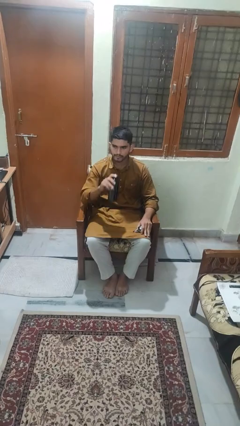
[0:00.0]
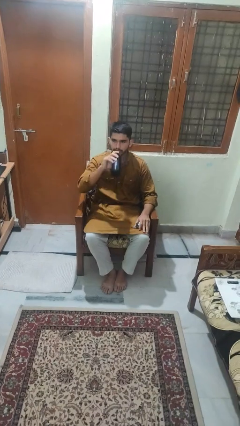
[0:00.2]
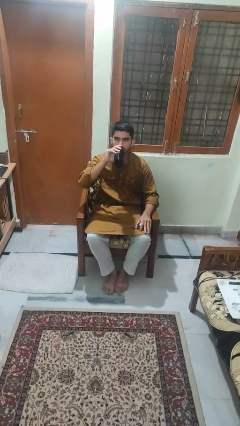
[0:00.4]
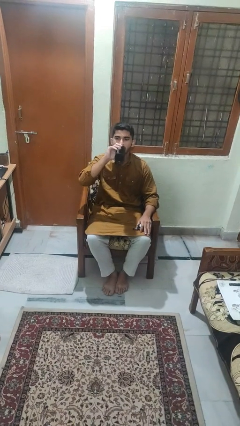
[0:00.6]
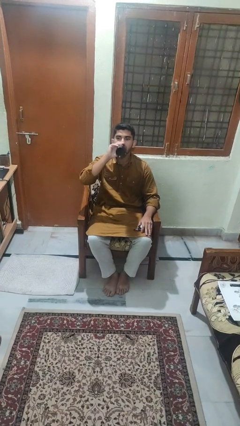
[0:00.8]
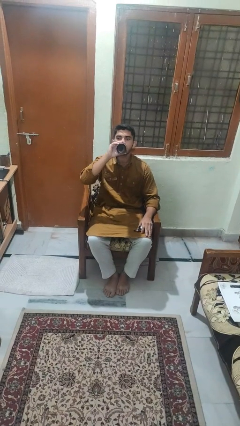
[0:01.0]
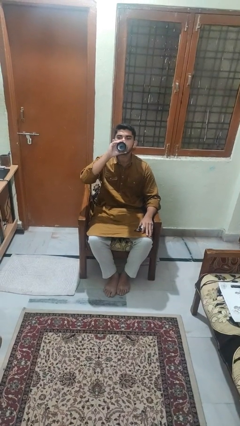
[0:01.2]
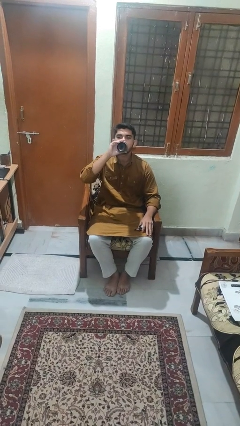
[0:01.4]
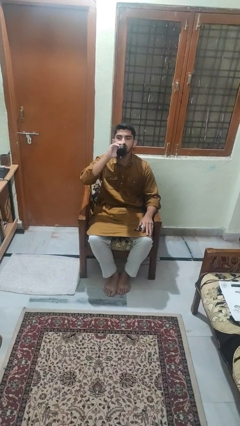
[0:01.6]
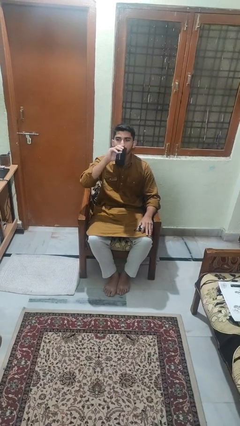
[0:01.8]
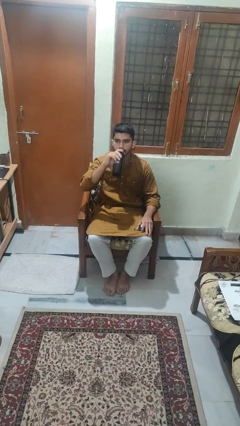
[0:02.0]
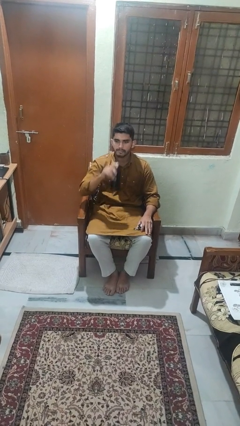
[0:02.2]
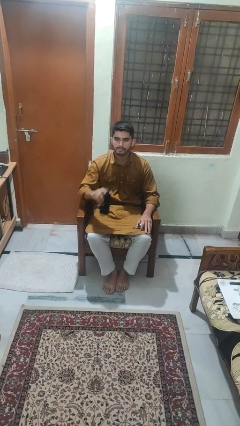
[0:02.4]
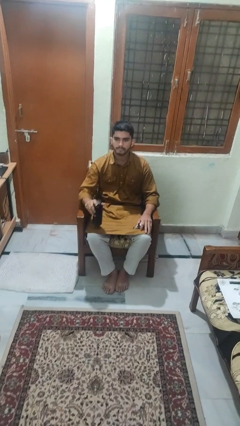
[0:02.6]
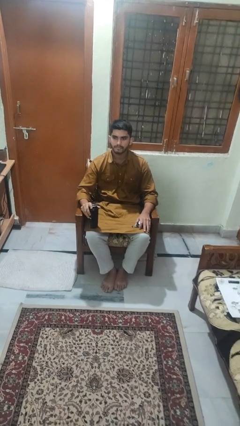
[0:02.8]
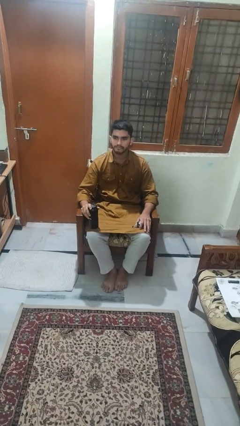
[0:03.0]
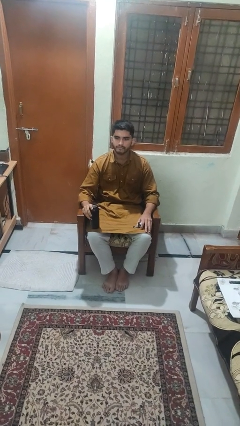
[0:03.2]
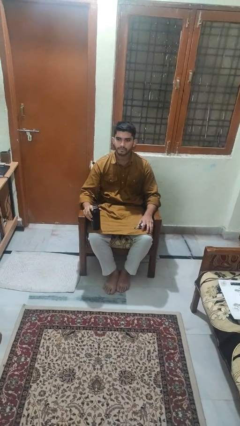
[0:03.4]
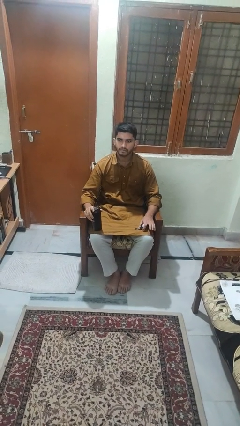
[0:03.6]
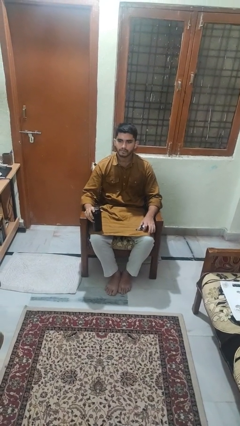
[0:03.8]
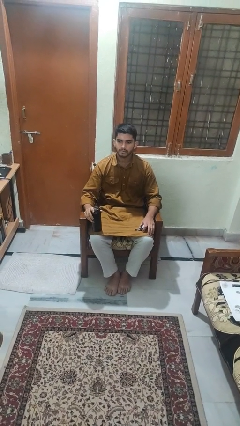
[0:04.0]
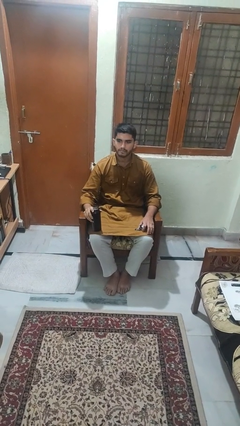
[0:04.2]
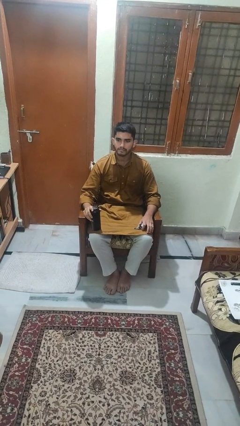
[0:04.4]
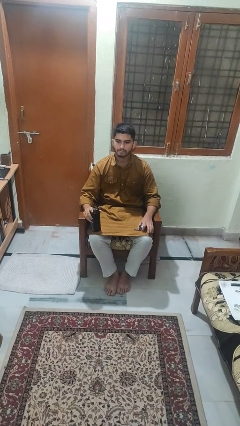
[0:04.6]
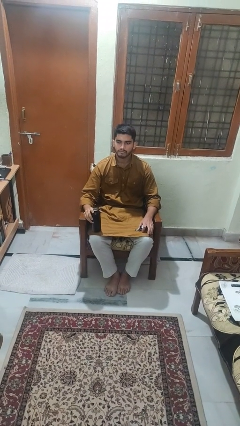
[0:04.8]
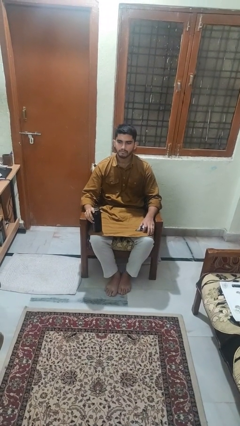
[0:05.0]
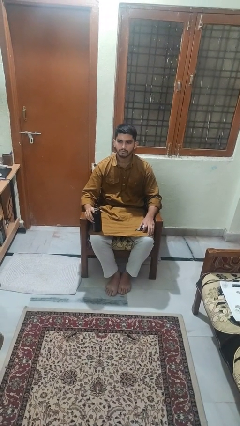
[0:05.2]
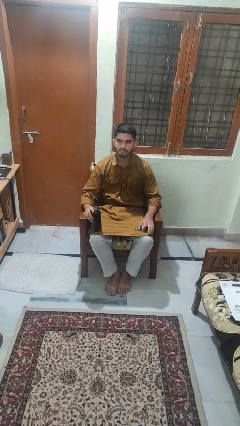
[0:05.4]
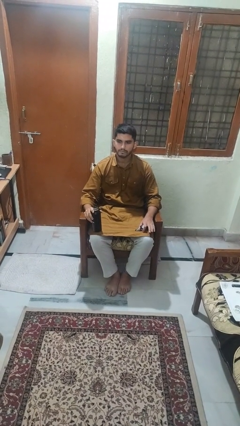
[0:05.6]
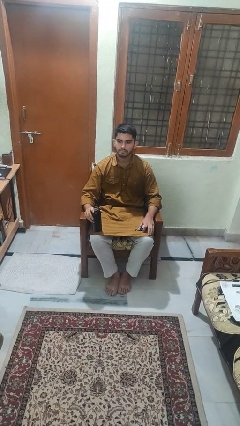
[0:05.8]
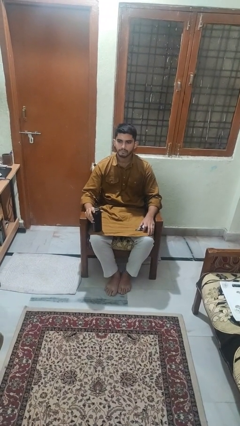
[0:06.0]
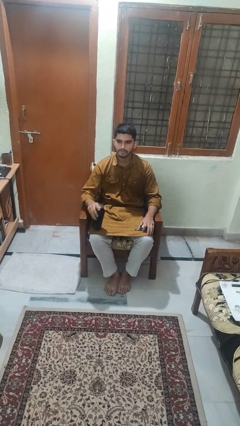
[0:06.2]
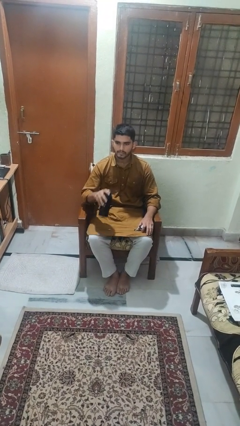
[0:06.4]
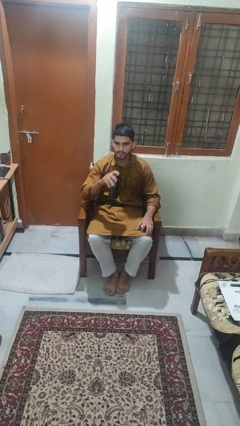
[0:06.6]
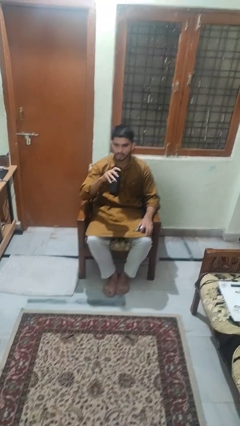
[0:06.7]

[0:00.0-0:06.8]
person drinks from bottle

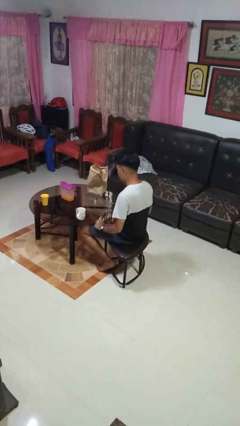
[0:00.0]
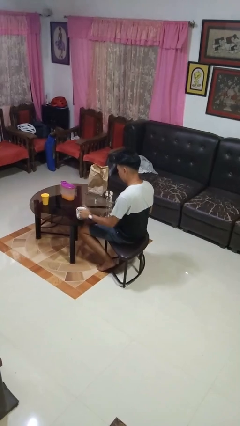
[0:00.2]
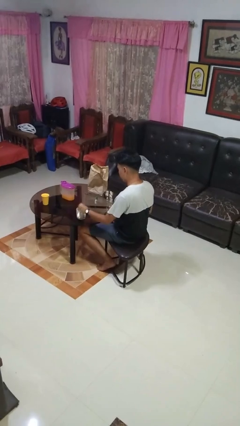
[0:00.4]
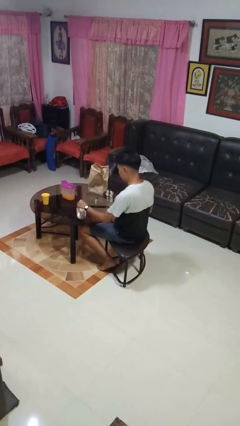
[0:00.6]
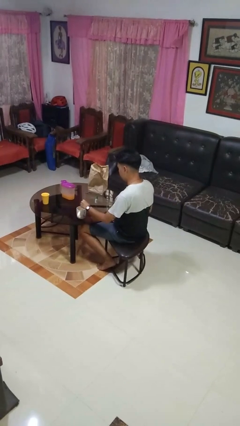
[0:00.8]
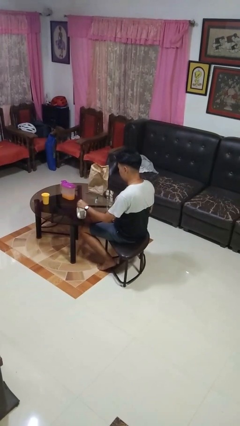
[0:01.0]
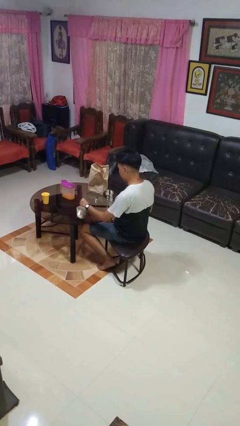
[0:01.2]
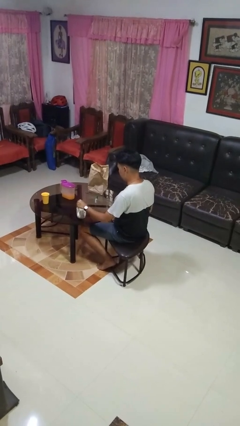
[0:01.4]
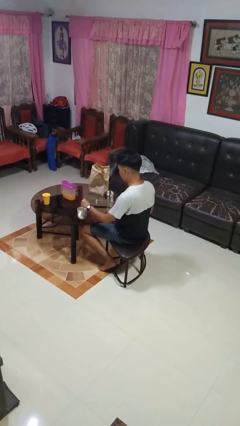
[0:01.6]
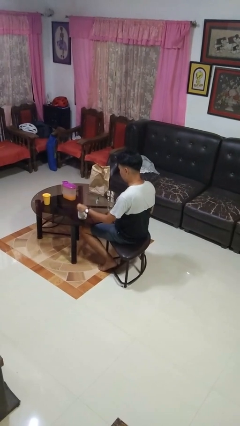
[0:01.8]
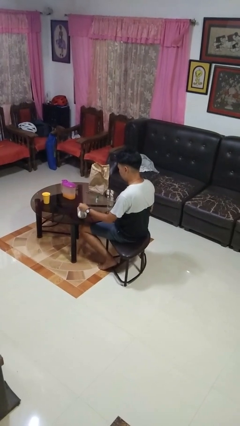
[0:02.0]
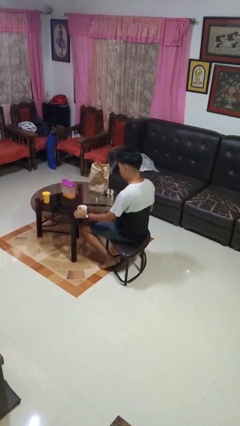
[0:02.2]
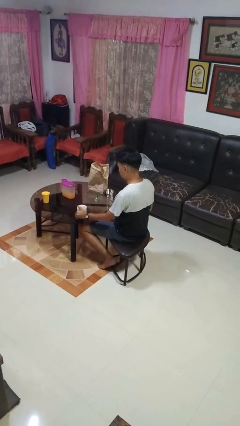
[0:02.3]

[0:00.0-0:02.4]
person stirs mug

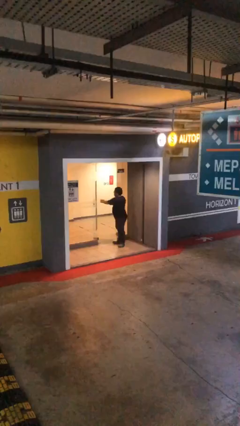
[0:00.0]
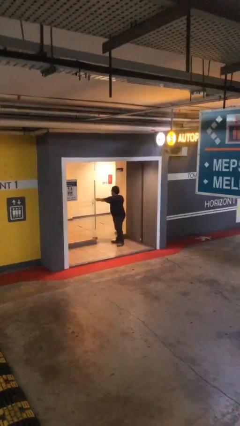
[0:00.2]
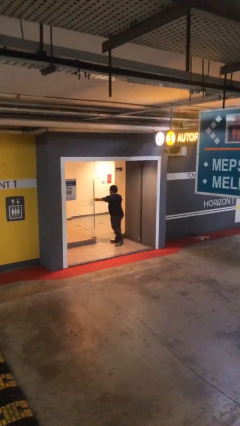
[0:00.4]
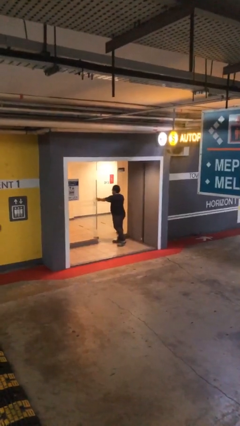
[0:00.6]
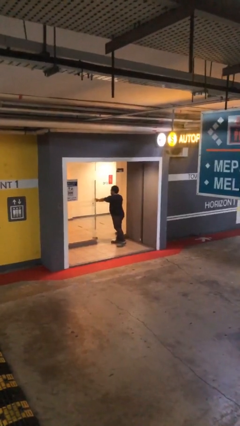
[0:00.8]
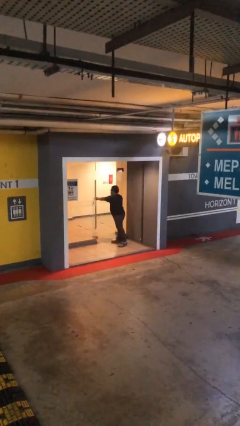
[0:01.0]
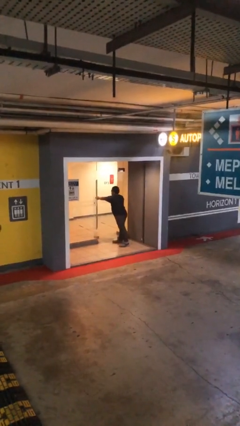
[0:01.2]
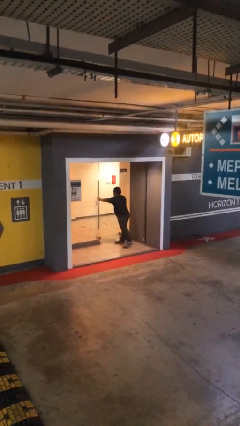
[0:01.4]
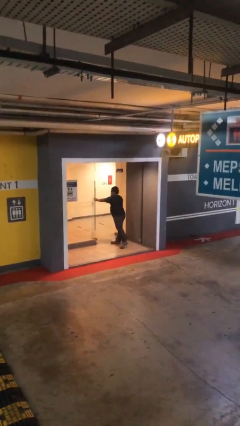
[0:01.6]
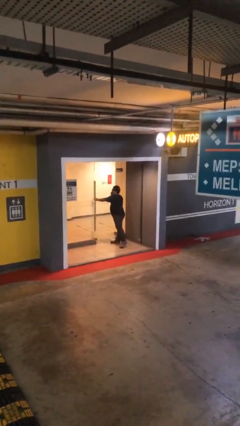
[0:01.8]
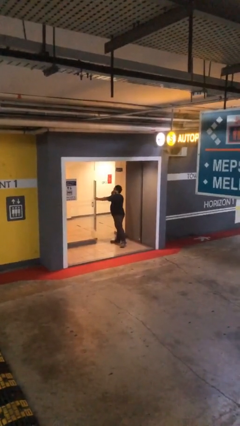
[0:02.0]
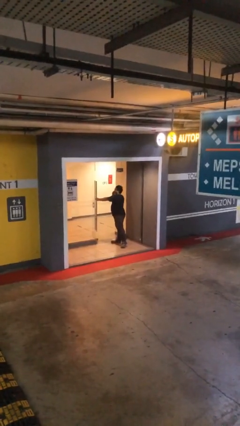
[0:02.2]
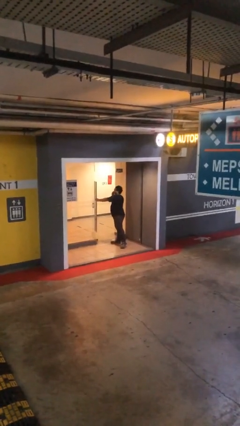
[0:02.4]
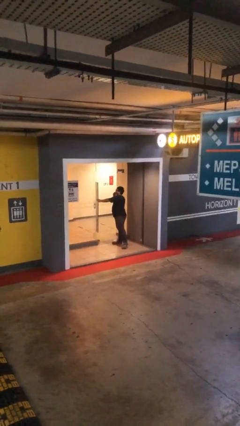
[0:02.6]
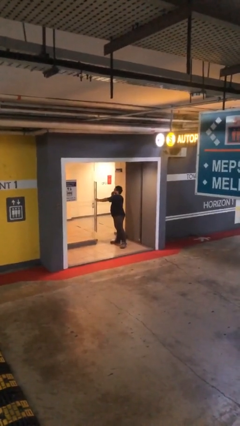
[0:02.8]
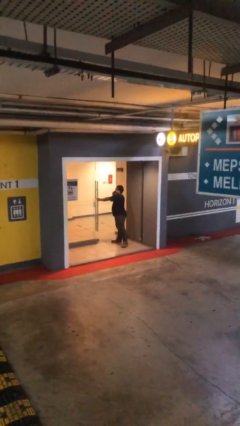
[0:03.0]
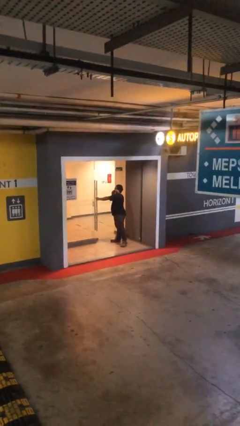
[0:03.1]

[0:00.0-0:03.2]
person closes facility door

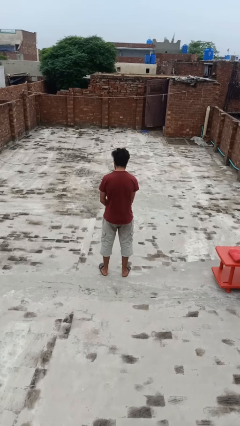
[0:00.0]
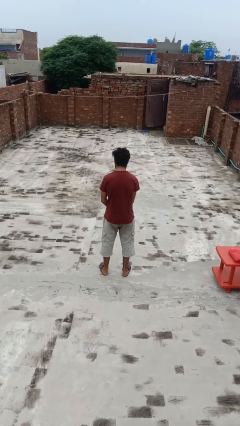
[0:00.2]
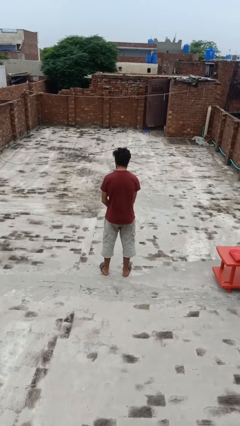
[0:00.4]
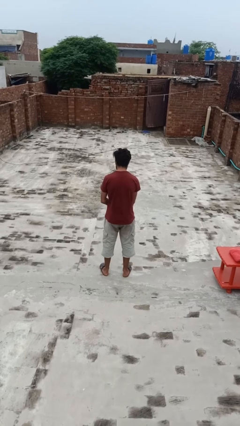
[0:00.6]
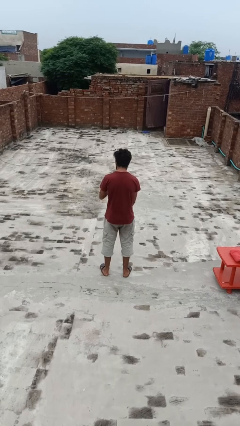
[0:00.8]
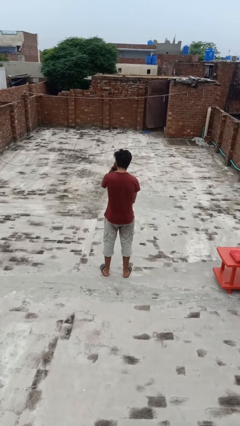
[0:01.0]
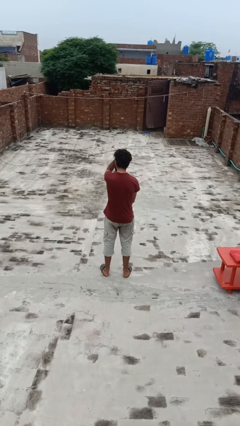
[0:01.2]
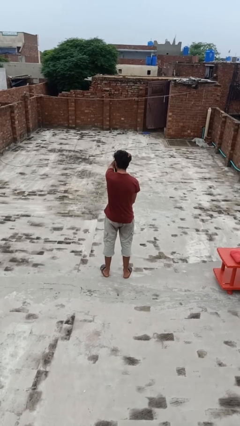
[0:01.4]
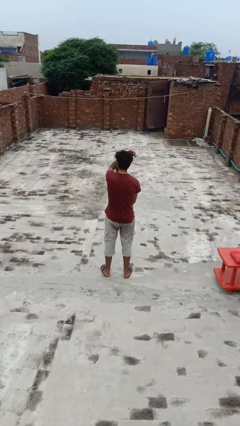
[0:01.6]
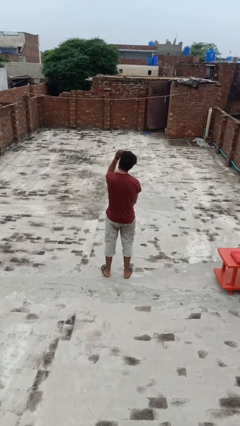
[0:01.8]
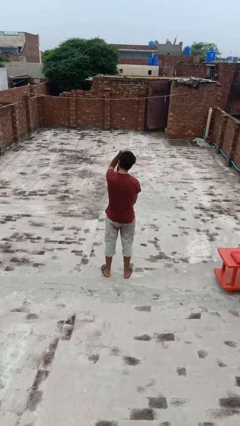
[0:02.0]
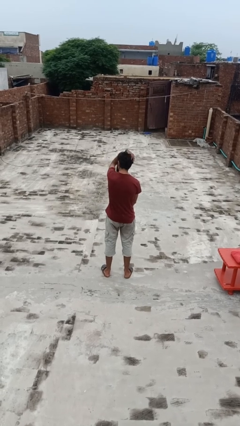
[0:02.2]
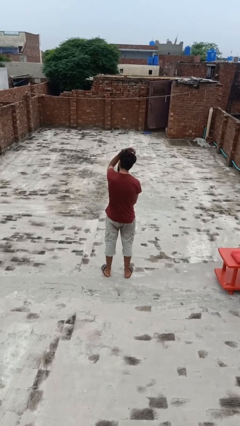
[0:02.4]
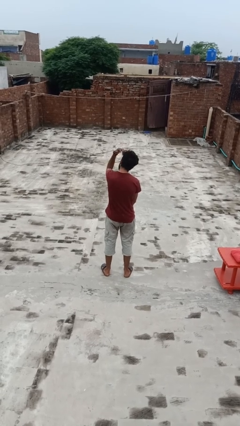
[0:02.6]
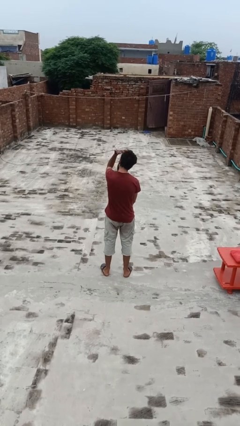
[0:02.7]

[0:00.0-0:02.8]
person strokes hair

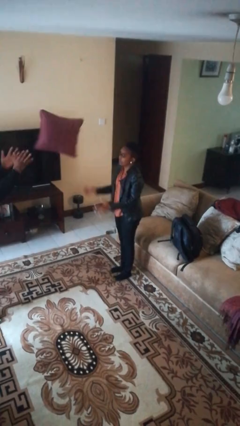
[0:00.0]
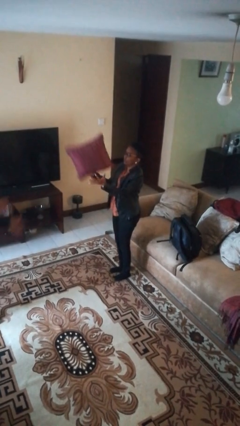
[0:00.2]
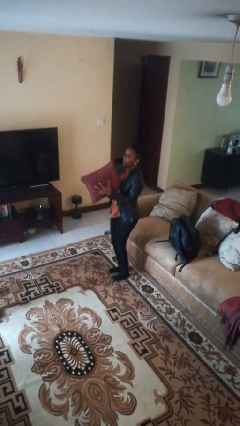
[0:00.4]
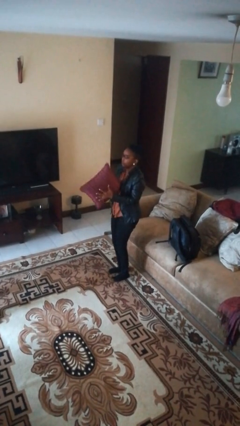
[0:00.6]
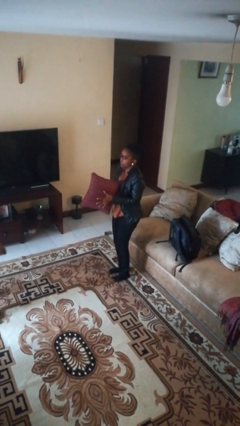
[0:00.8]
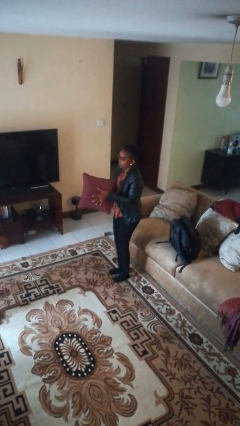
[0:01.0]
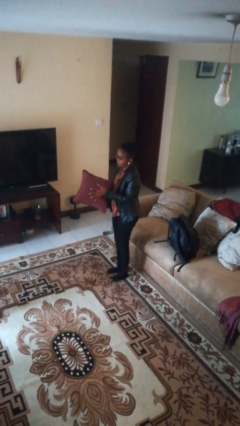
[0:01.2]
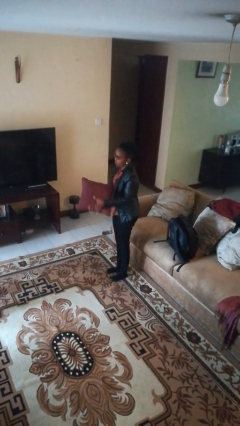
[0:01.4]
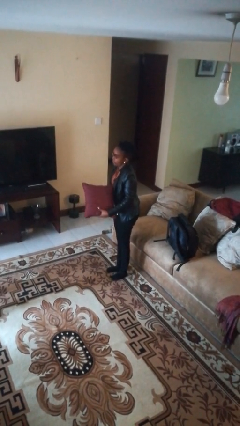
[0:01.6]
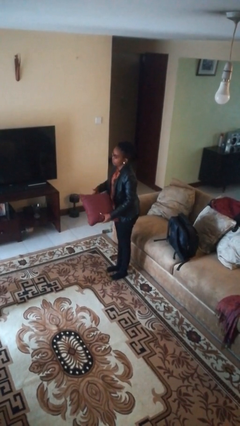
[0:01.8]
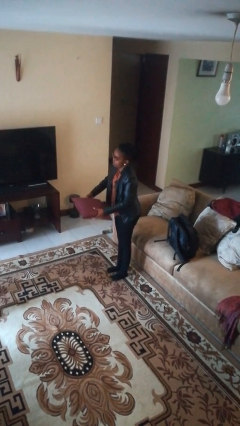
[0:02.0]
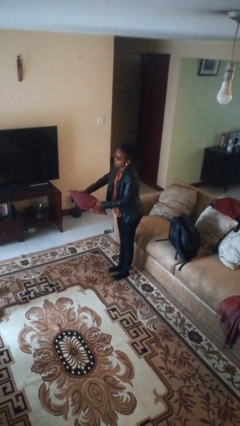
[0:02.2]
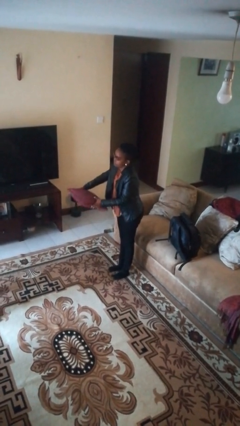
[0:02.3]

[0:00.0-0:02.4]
person catches object from person
